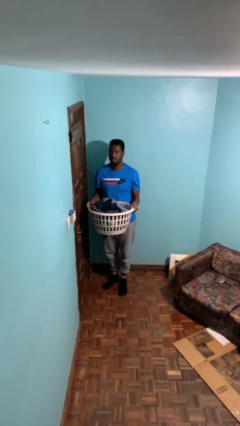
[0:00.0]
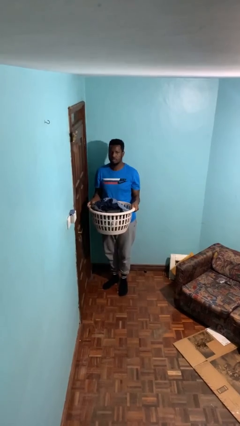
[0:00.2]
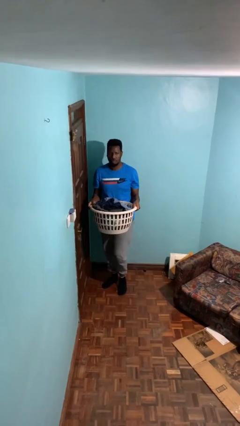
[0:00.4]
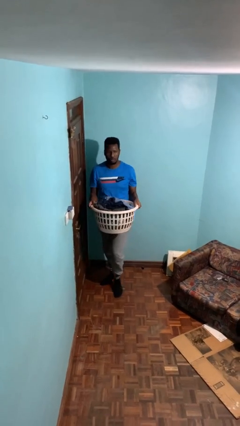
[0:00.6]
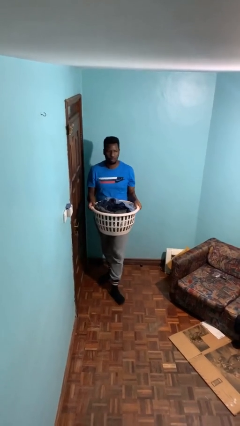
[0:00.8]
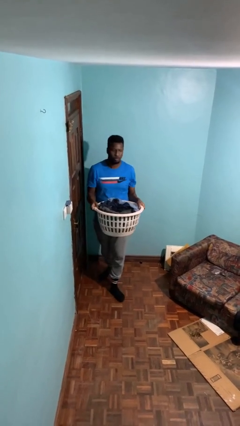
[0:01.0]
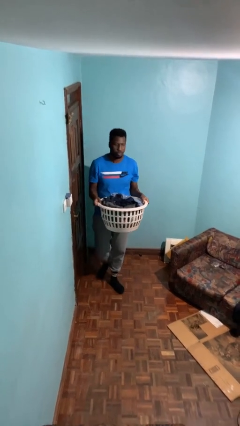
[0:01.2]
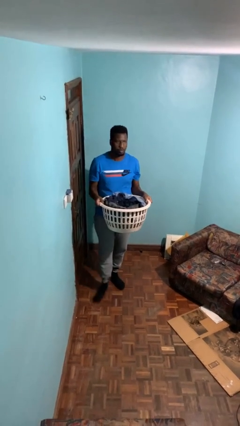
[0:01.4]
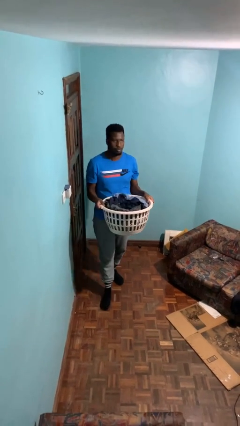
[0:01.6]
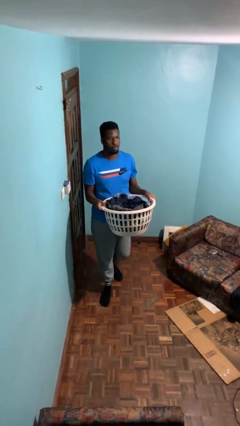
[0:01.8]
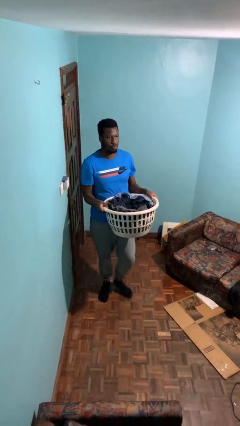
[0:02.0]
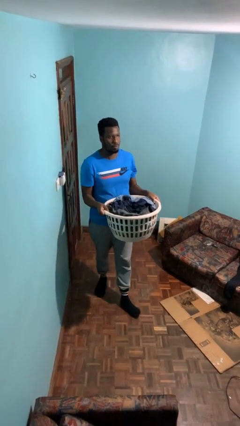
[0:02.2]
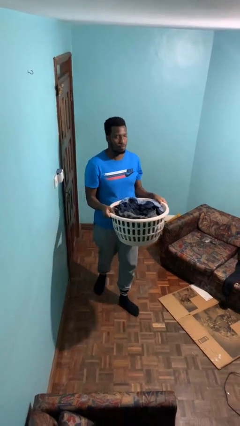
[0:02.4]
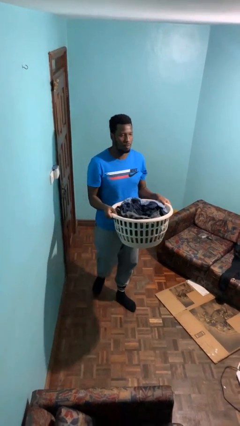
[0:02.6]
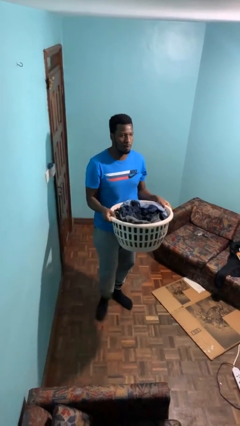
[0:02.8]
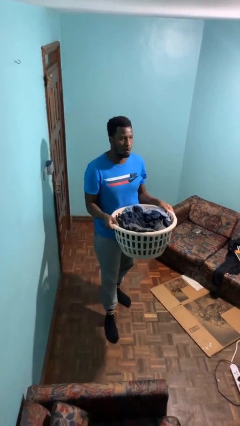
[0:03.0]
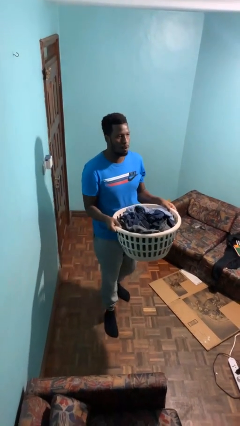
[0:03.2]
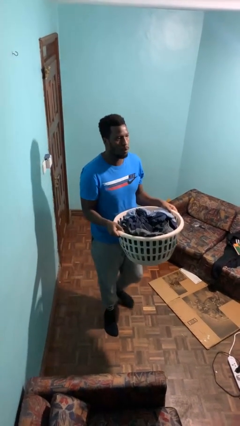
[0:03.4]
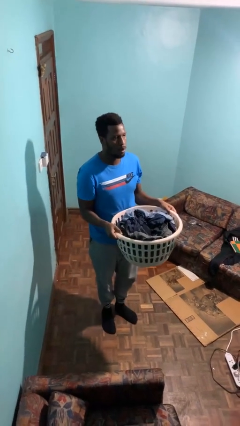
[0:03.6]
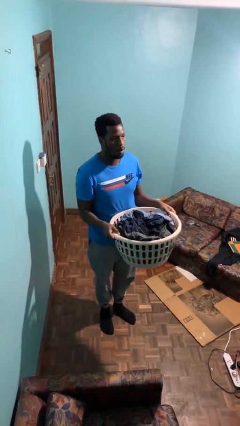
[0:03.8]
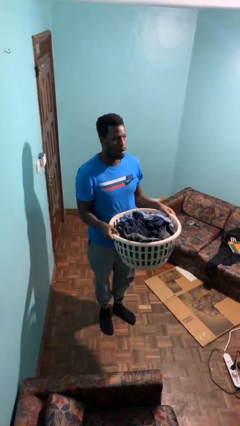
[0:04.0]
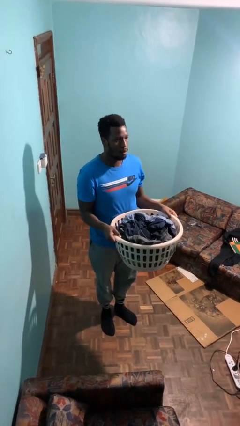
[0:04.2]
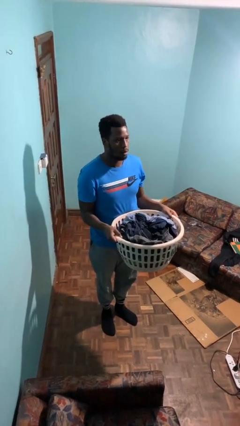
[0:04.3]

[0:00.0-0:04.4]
person carries laundry basket

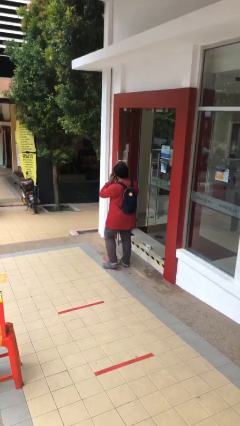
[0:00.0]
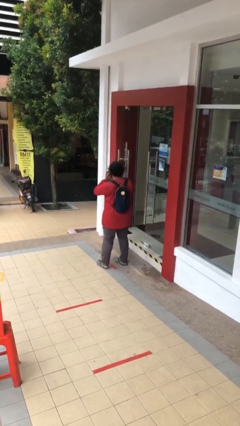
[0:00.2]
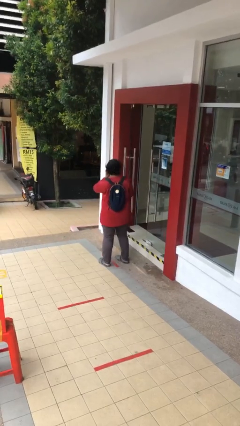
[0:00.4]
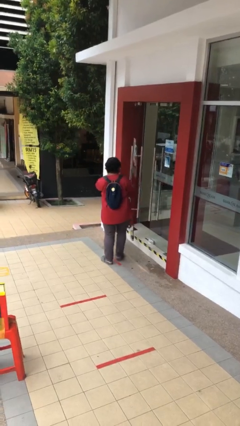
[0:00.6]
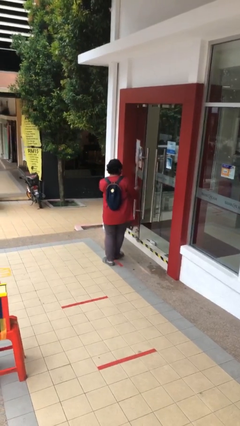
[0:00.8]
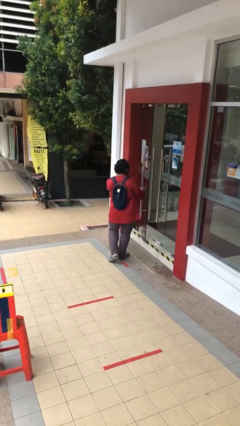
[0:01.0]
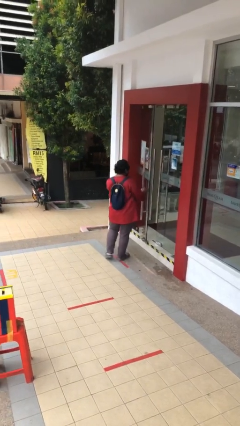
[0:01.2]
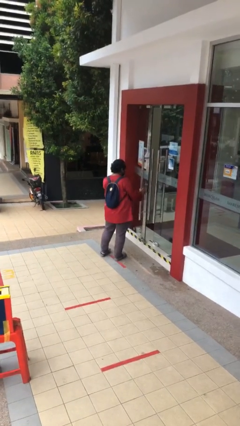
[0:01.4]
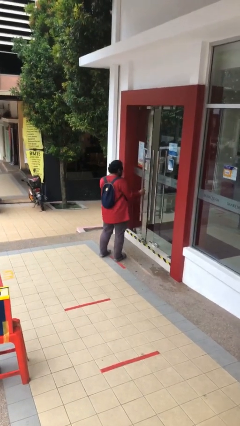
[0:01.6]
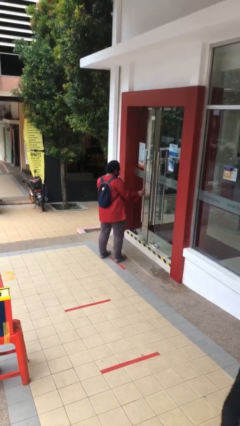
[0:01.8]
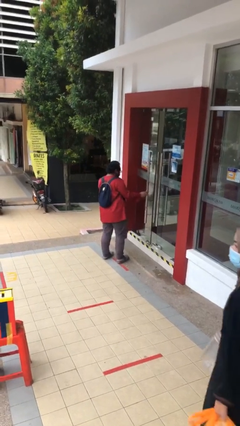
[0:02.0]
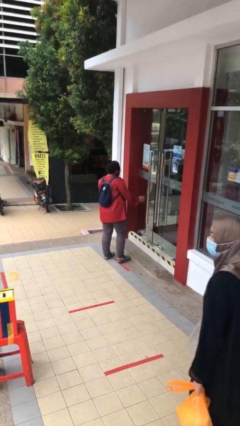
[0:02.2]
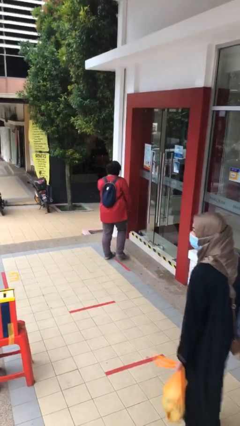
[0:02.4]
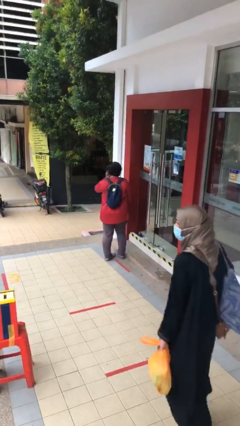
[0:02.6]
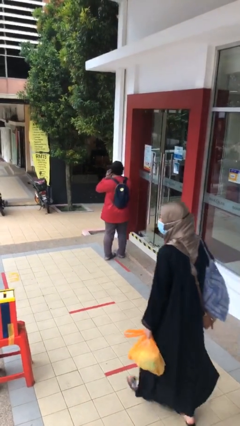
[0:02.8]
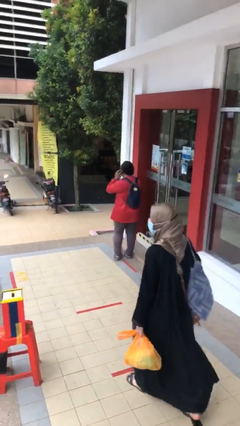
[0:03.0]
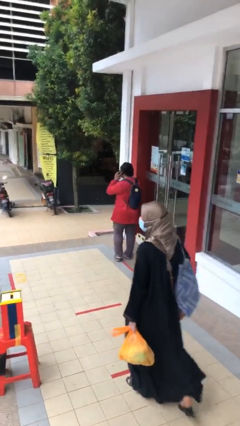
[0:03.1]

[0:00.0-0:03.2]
person closes facility door

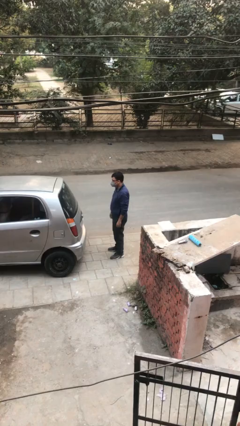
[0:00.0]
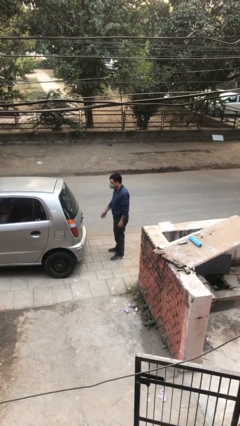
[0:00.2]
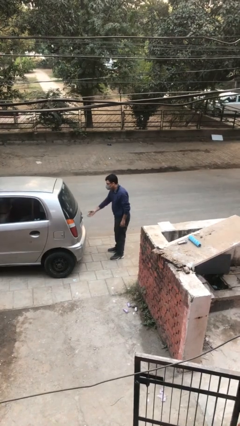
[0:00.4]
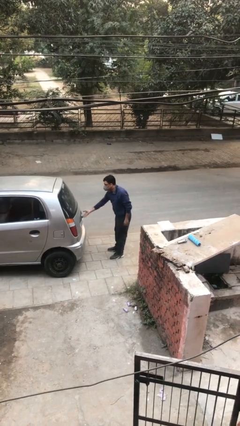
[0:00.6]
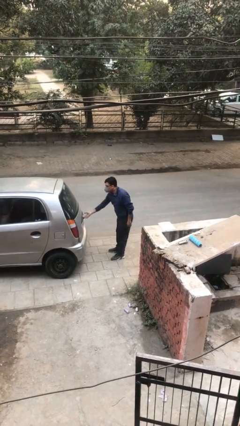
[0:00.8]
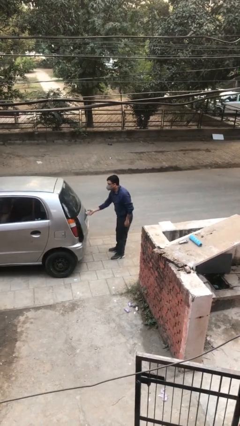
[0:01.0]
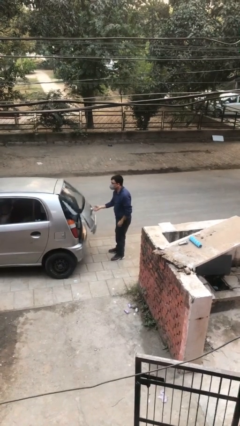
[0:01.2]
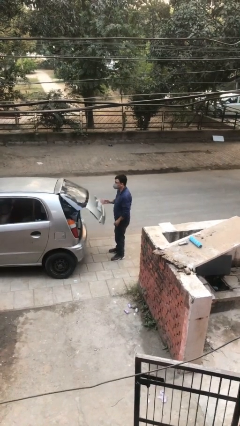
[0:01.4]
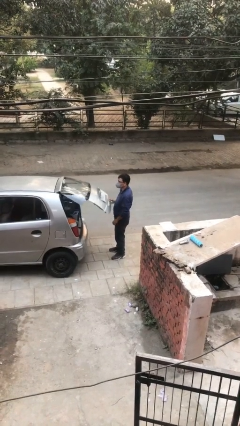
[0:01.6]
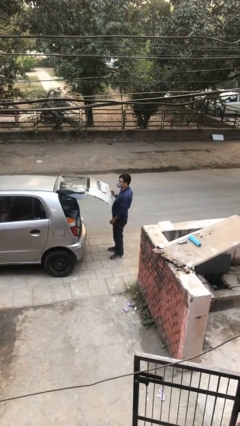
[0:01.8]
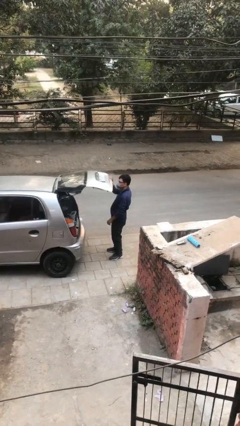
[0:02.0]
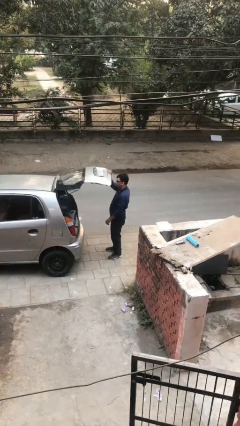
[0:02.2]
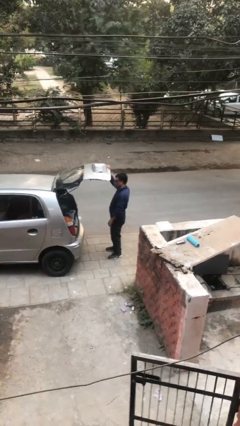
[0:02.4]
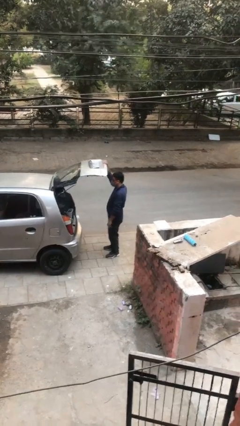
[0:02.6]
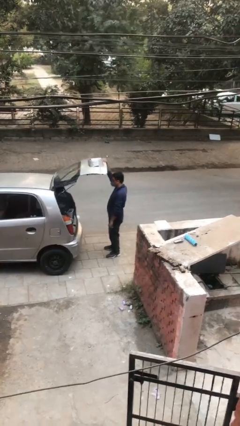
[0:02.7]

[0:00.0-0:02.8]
person opens car trunk

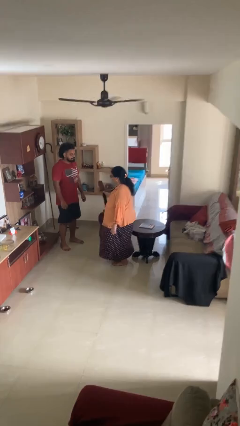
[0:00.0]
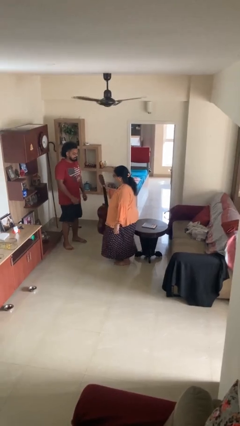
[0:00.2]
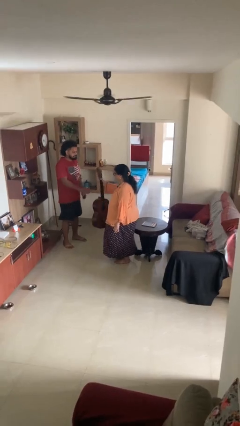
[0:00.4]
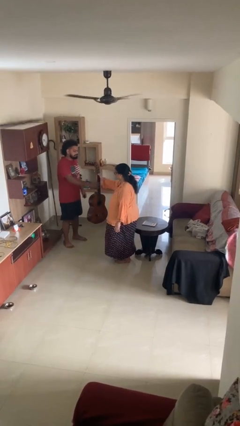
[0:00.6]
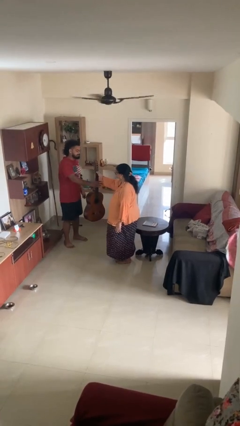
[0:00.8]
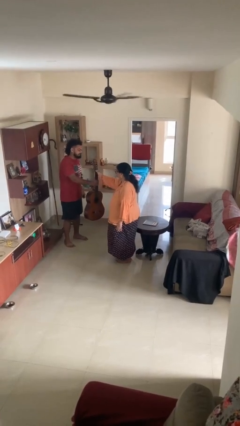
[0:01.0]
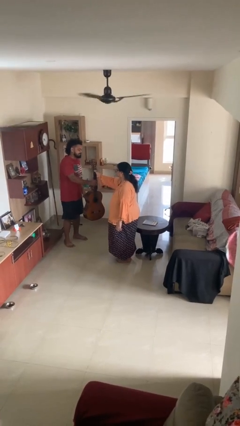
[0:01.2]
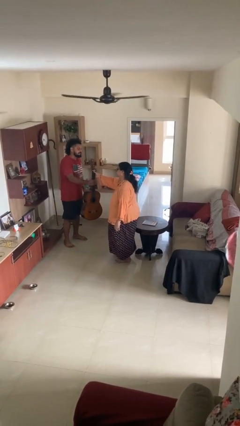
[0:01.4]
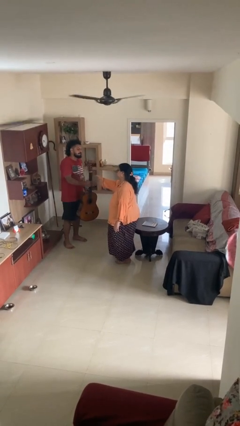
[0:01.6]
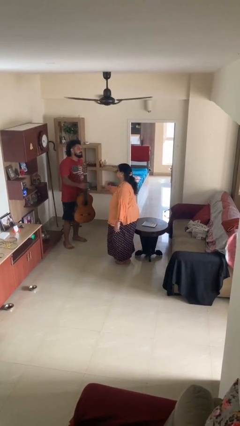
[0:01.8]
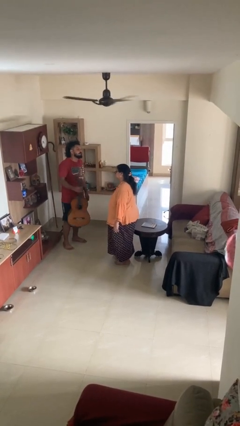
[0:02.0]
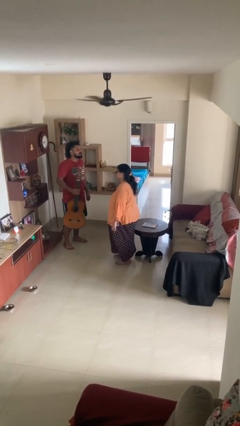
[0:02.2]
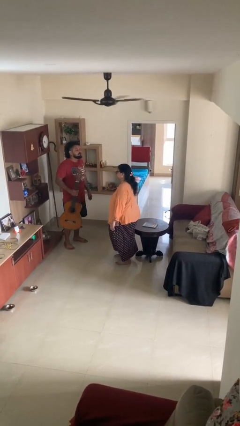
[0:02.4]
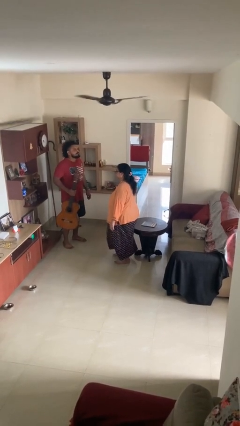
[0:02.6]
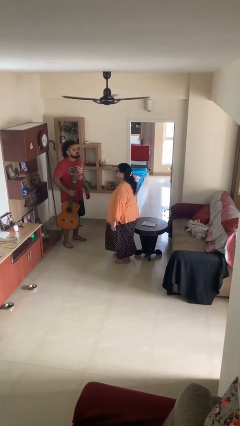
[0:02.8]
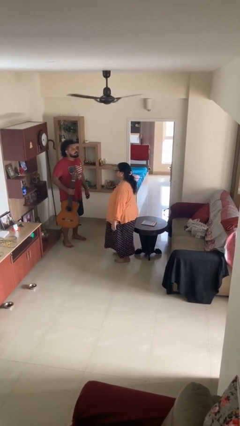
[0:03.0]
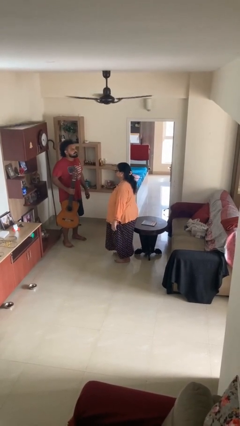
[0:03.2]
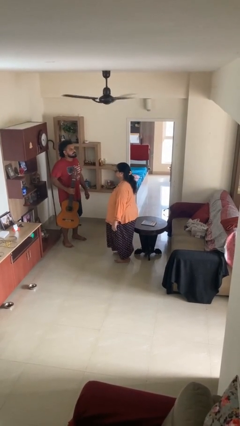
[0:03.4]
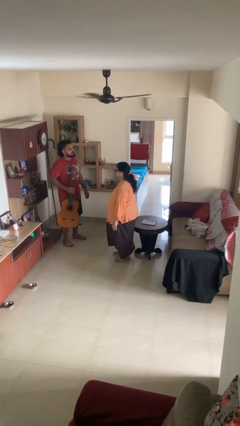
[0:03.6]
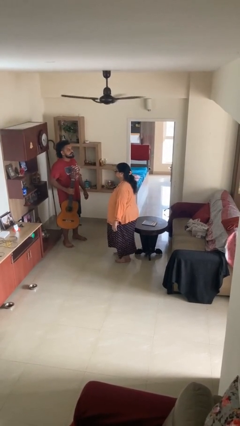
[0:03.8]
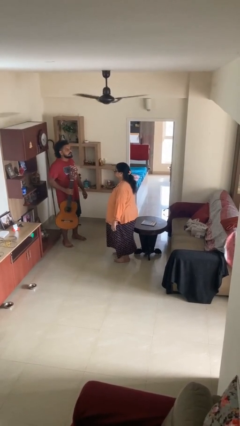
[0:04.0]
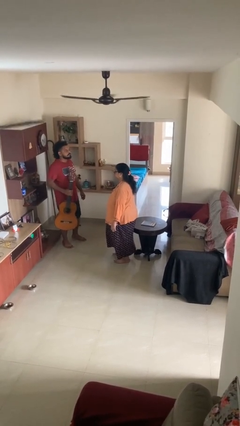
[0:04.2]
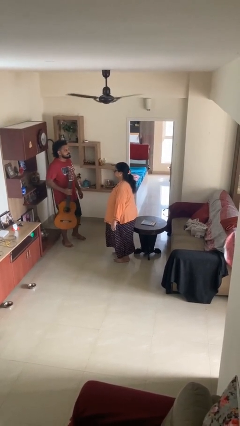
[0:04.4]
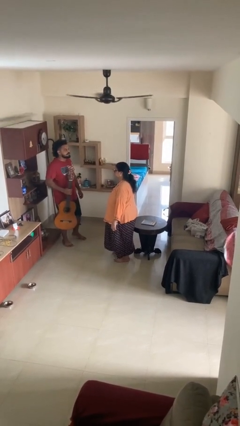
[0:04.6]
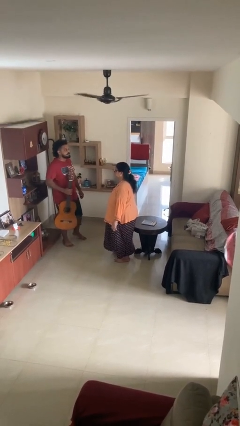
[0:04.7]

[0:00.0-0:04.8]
person transfers object to person

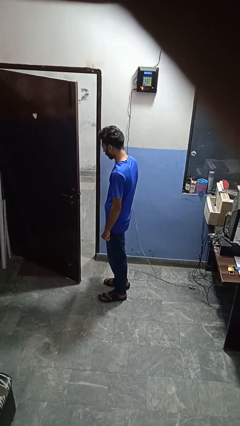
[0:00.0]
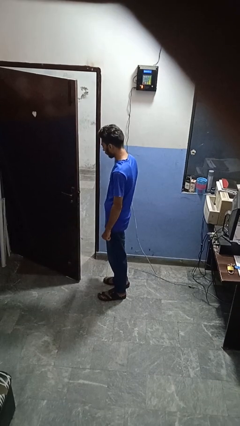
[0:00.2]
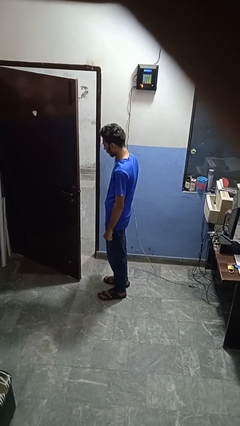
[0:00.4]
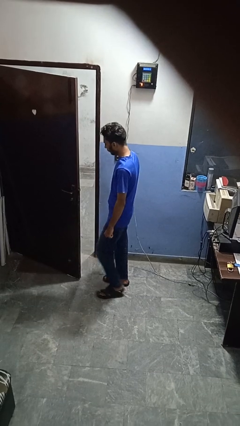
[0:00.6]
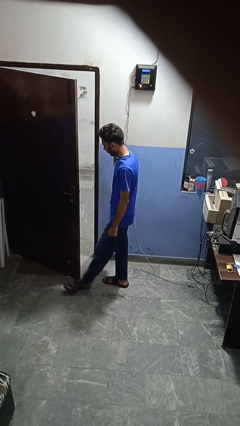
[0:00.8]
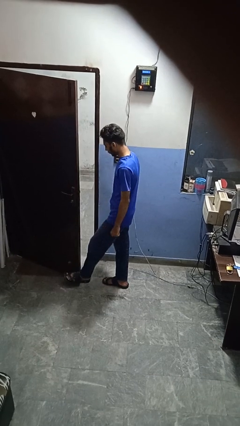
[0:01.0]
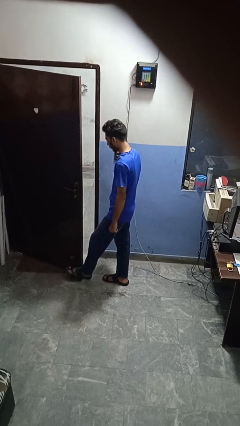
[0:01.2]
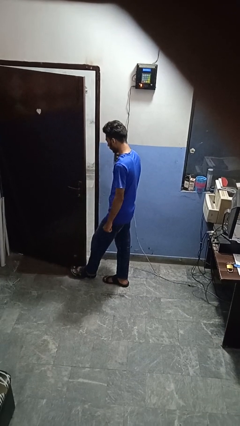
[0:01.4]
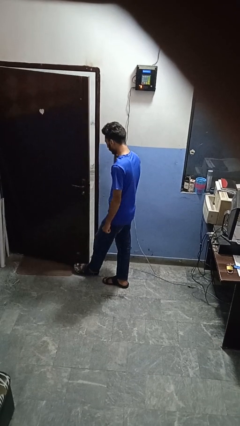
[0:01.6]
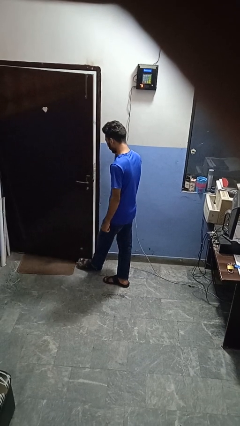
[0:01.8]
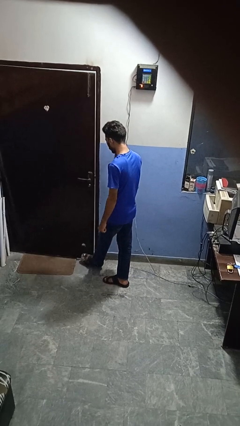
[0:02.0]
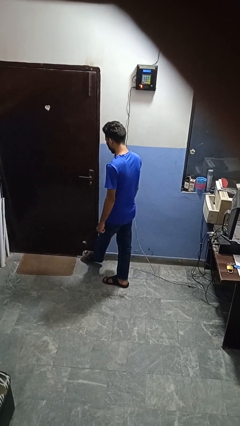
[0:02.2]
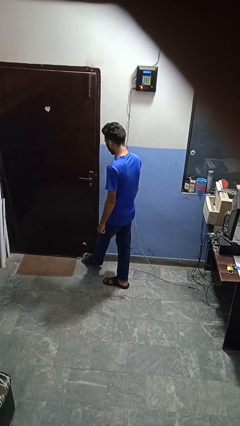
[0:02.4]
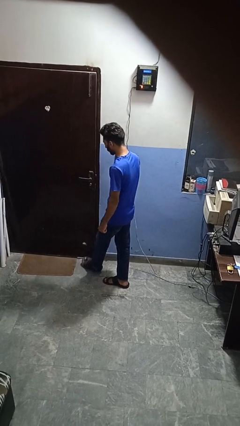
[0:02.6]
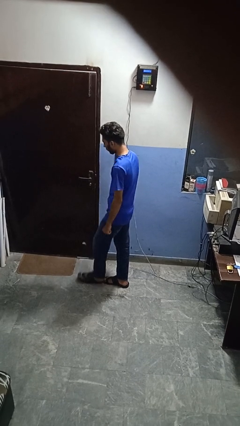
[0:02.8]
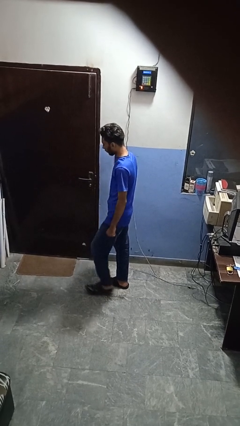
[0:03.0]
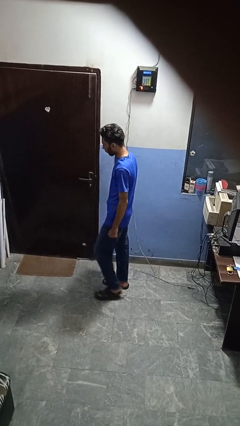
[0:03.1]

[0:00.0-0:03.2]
person closes door with foot
